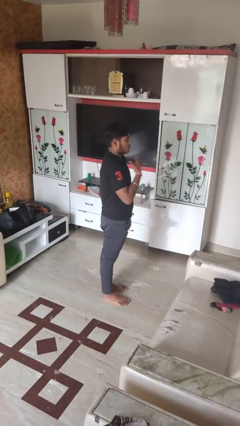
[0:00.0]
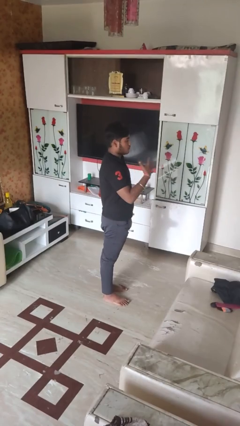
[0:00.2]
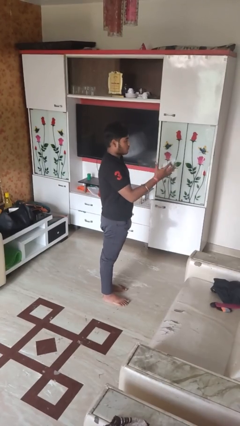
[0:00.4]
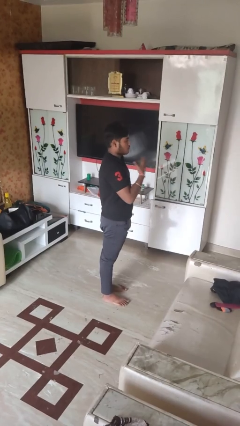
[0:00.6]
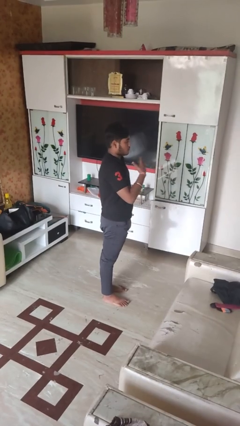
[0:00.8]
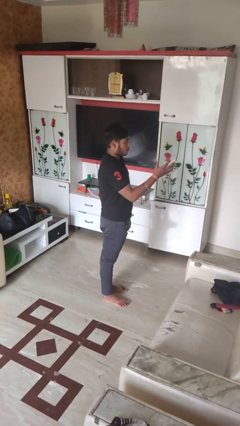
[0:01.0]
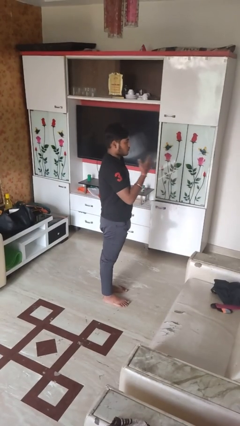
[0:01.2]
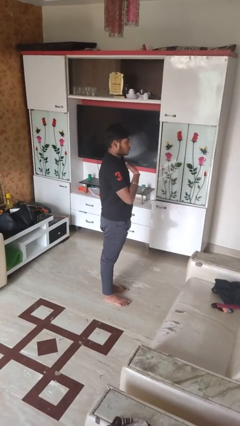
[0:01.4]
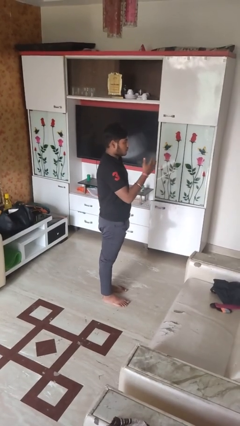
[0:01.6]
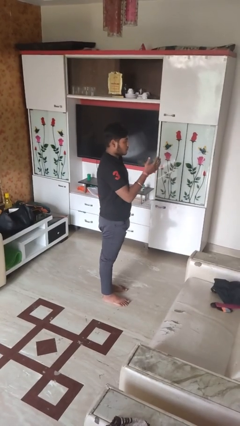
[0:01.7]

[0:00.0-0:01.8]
person drums on chest

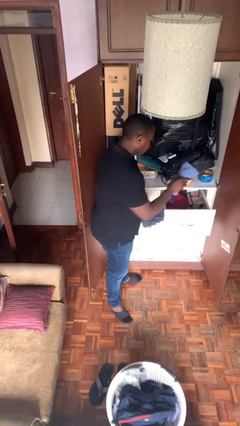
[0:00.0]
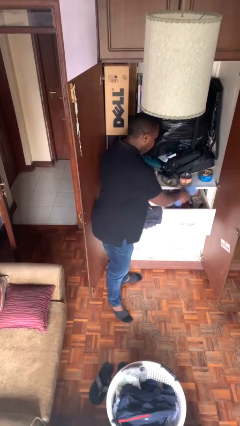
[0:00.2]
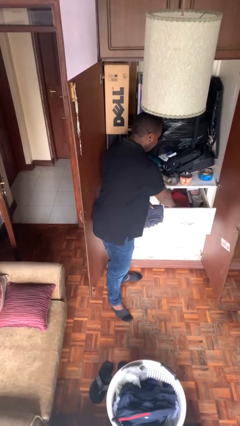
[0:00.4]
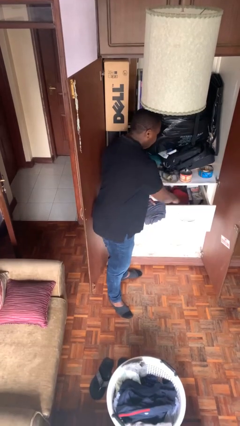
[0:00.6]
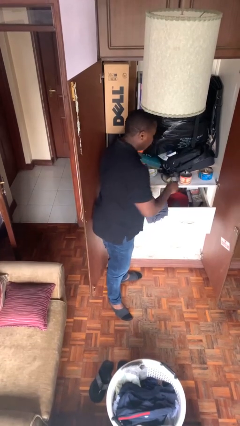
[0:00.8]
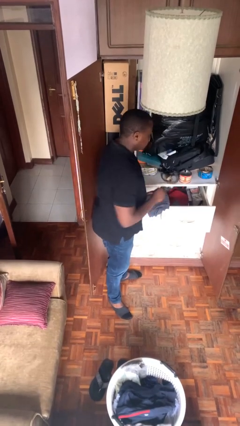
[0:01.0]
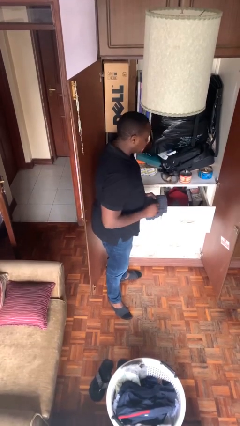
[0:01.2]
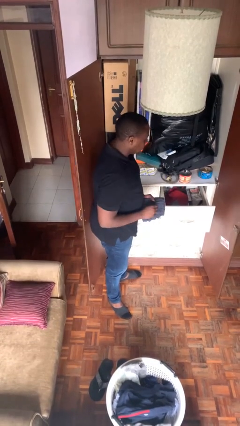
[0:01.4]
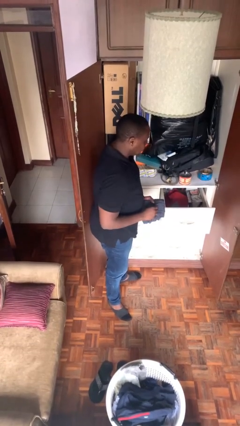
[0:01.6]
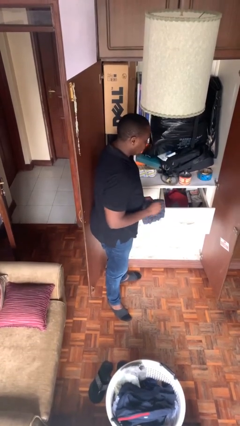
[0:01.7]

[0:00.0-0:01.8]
person puts clothes into dresser

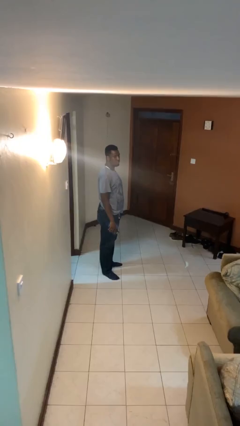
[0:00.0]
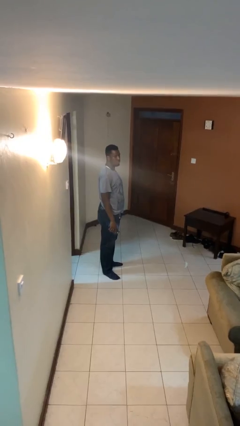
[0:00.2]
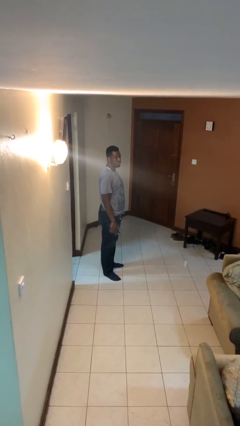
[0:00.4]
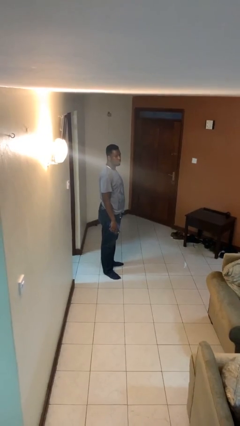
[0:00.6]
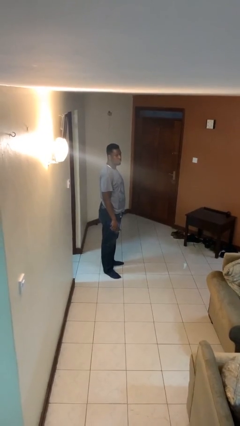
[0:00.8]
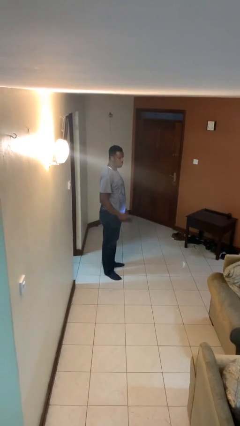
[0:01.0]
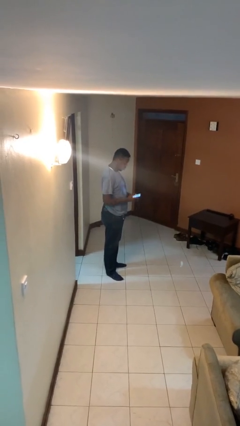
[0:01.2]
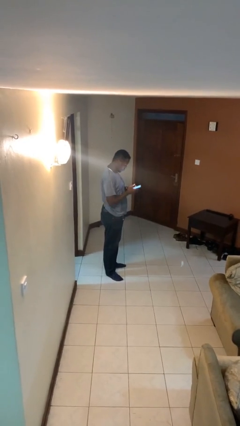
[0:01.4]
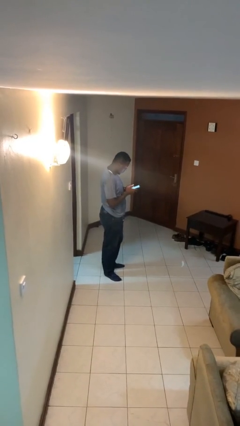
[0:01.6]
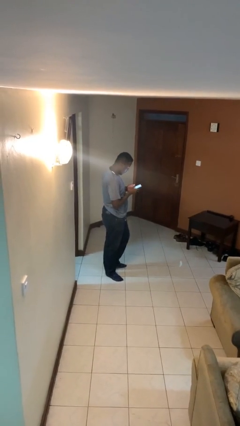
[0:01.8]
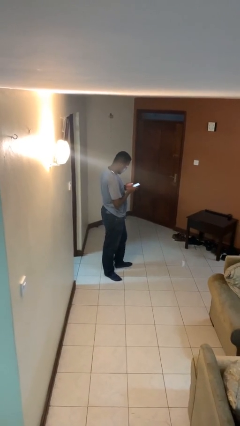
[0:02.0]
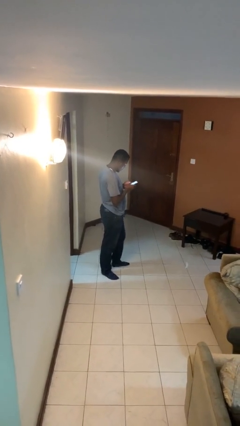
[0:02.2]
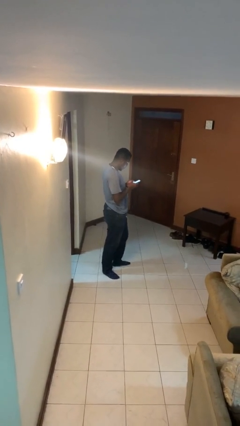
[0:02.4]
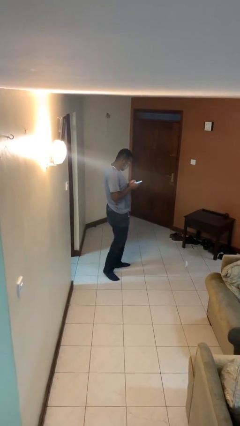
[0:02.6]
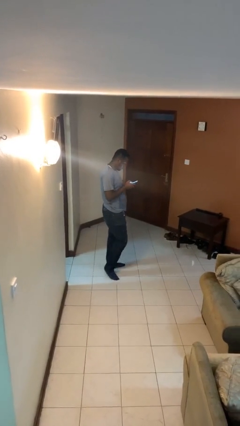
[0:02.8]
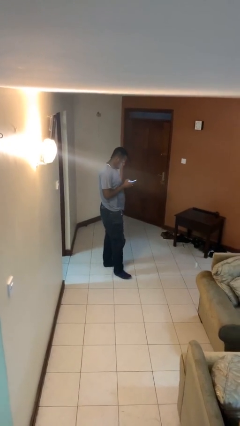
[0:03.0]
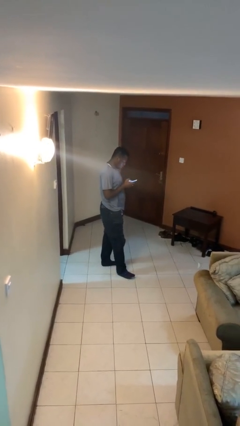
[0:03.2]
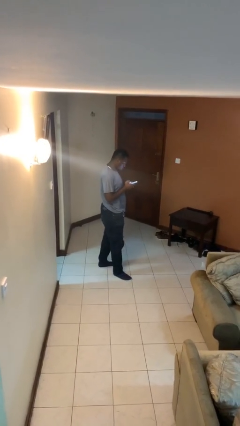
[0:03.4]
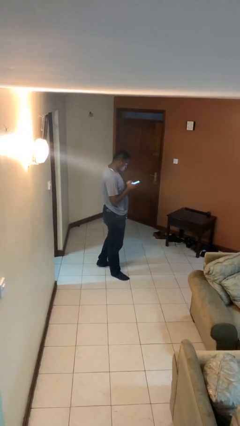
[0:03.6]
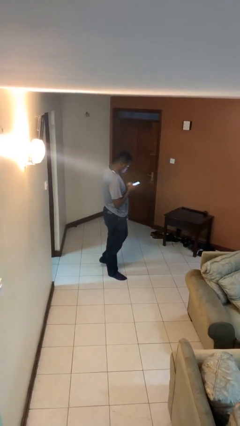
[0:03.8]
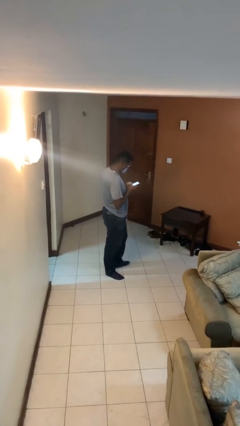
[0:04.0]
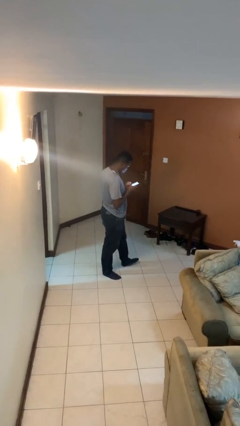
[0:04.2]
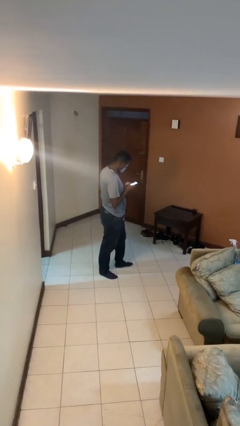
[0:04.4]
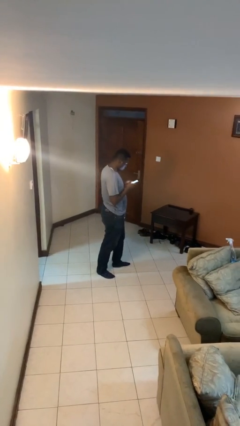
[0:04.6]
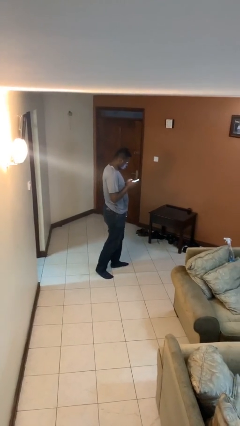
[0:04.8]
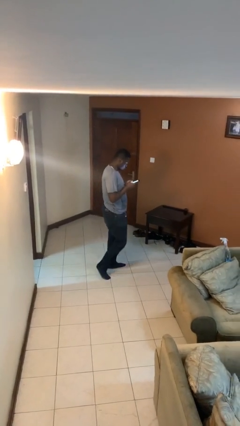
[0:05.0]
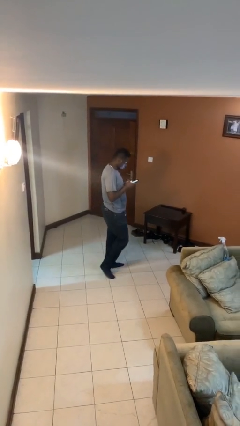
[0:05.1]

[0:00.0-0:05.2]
person texts on phone

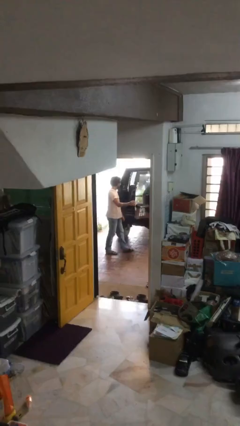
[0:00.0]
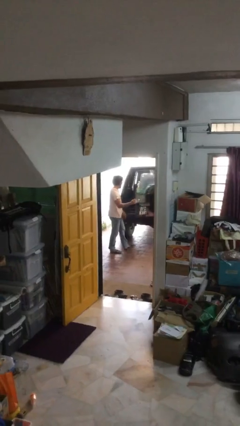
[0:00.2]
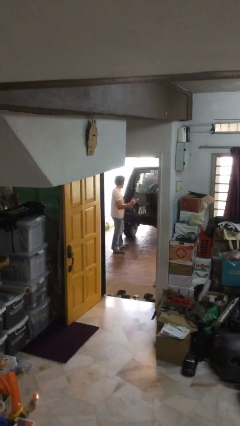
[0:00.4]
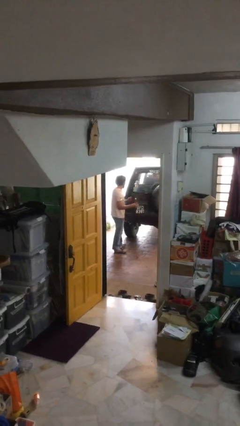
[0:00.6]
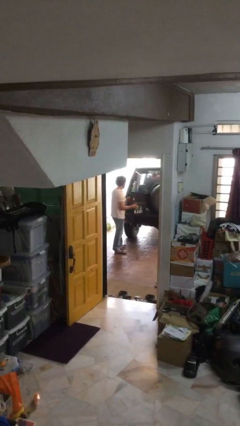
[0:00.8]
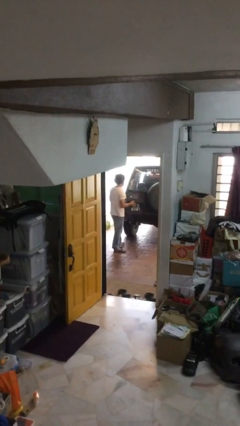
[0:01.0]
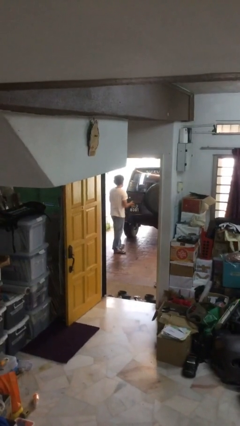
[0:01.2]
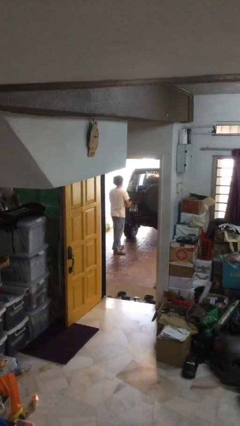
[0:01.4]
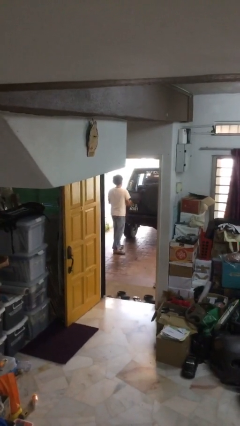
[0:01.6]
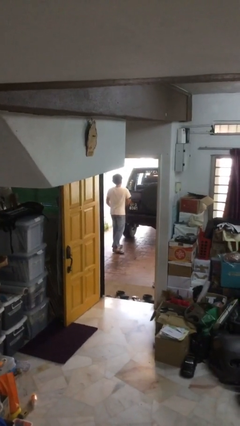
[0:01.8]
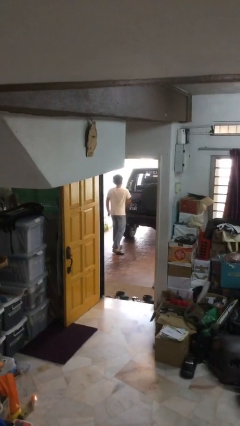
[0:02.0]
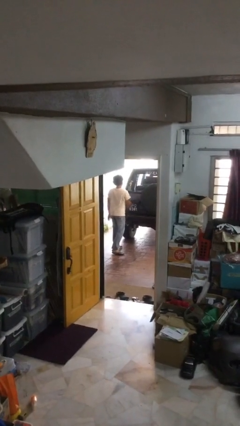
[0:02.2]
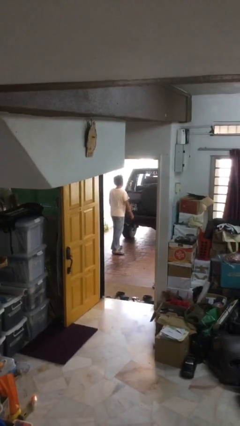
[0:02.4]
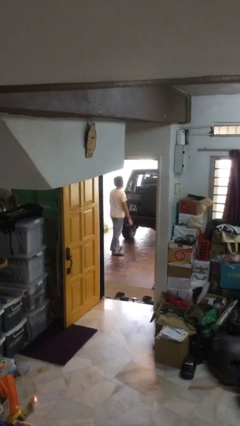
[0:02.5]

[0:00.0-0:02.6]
person closes car trunk

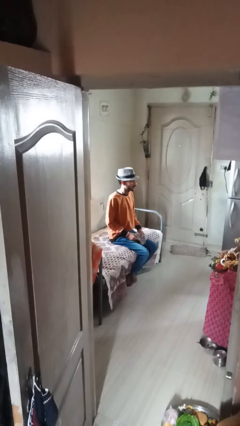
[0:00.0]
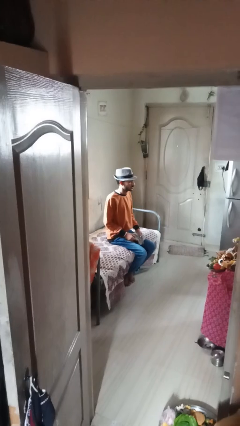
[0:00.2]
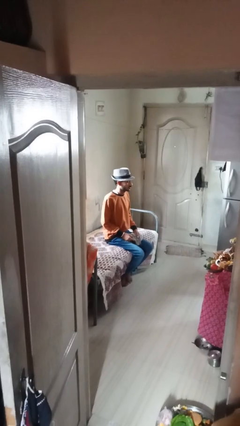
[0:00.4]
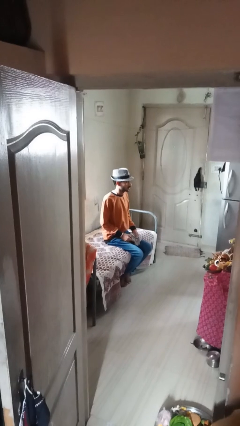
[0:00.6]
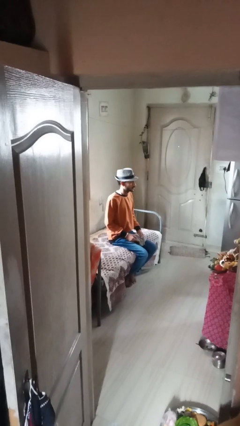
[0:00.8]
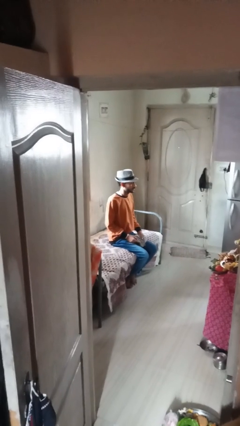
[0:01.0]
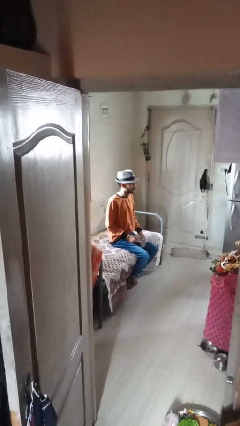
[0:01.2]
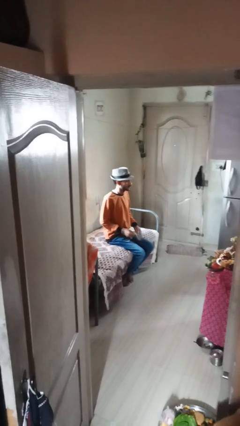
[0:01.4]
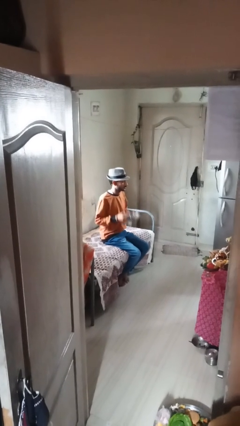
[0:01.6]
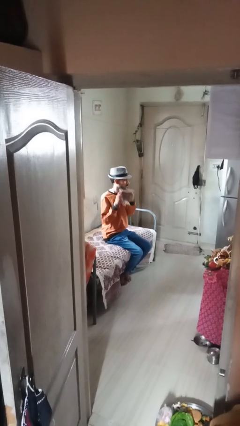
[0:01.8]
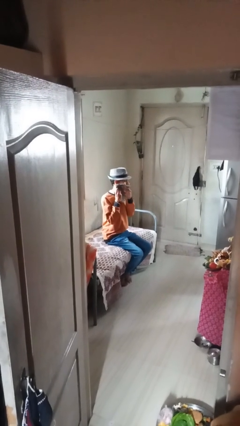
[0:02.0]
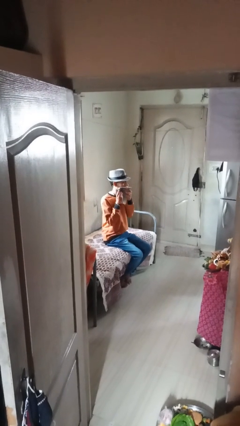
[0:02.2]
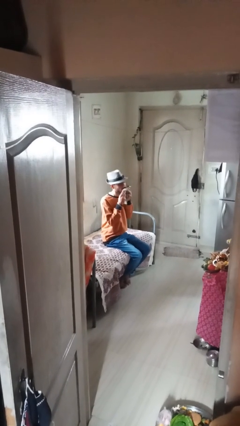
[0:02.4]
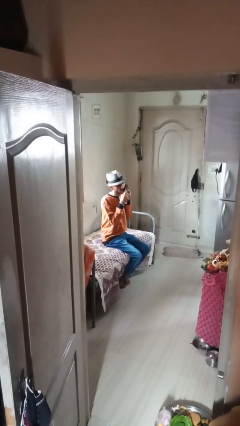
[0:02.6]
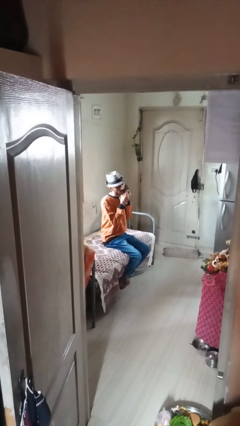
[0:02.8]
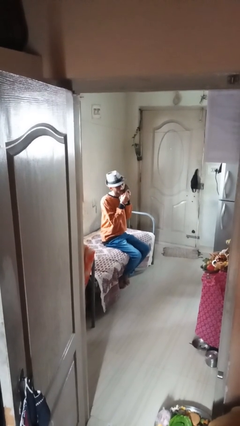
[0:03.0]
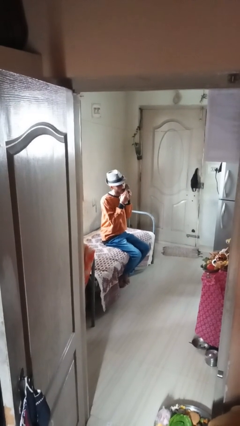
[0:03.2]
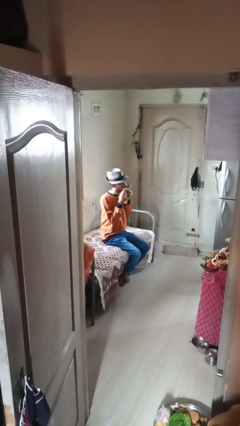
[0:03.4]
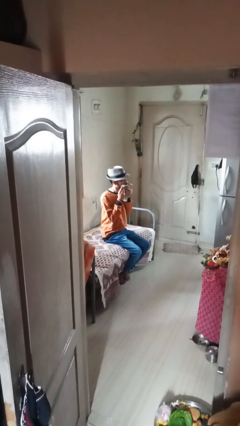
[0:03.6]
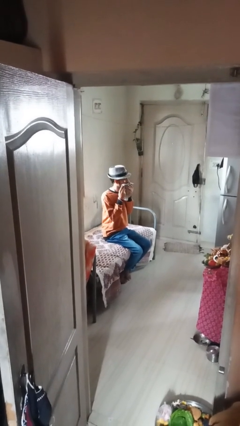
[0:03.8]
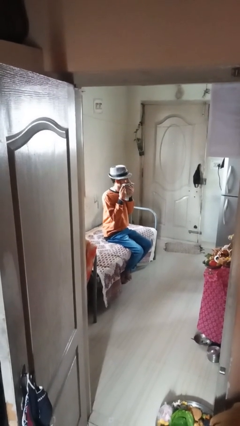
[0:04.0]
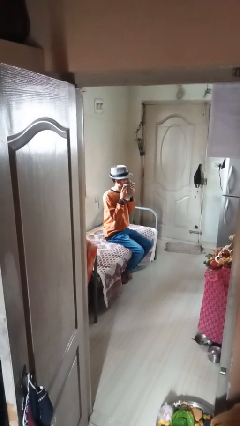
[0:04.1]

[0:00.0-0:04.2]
person wipes mouth with napkin

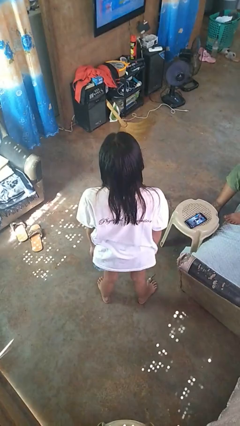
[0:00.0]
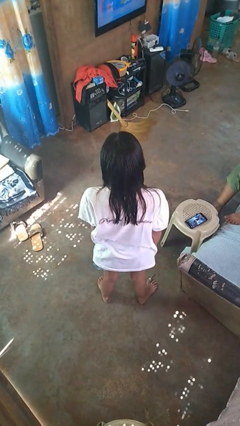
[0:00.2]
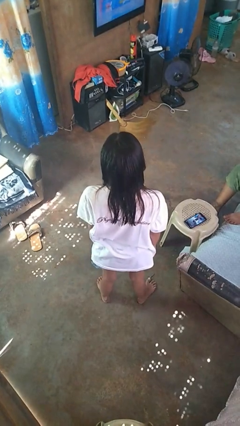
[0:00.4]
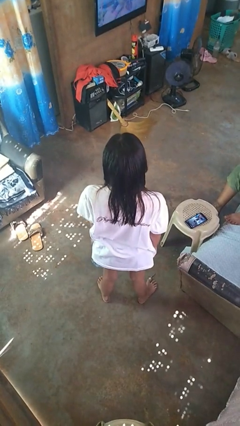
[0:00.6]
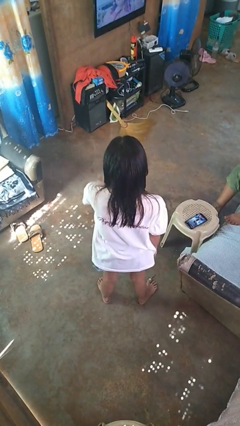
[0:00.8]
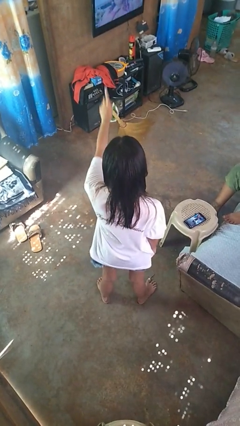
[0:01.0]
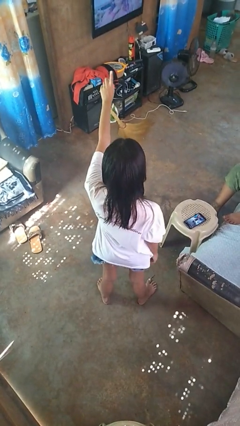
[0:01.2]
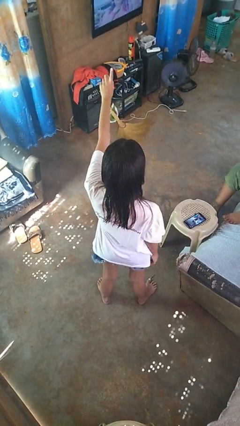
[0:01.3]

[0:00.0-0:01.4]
person gestures number three
